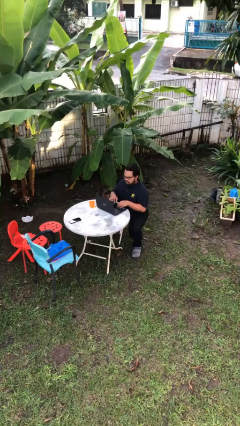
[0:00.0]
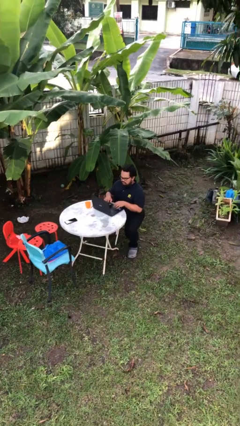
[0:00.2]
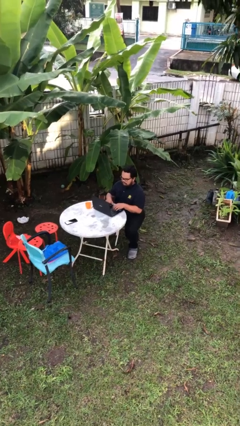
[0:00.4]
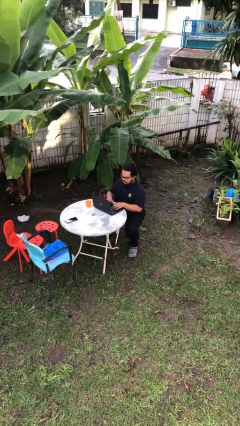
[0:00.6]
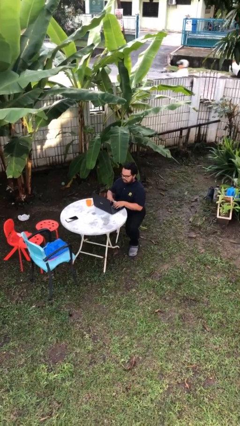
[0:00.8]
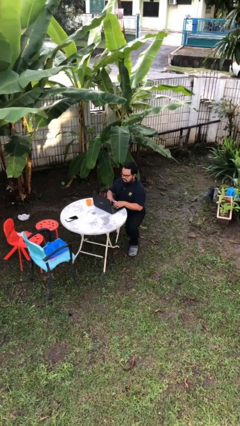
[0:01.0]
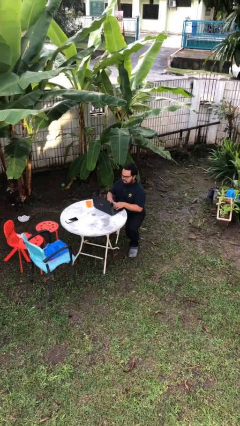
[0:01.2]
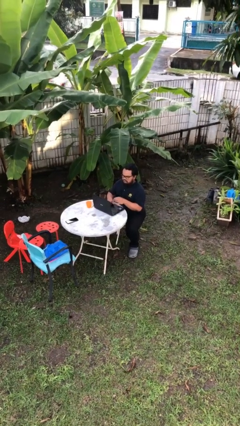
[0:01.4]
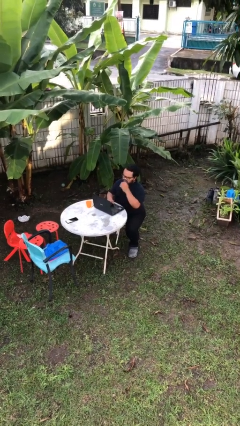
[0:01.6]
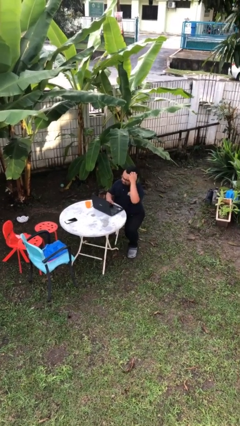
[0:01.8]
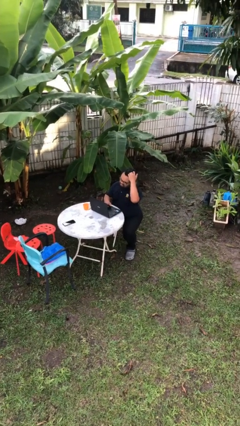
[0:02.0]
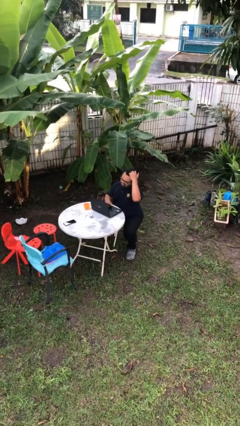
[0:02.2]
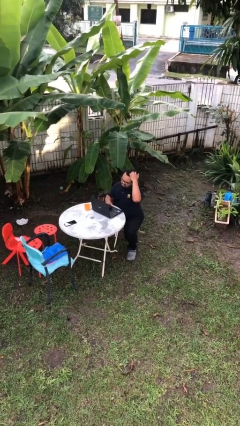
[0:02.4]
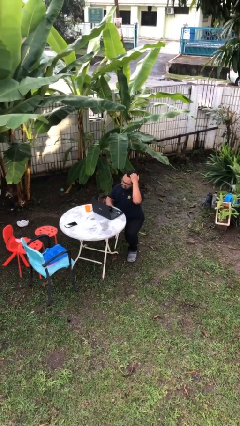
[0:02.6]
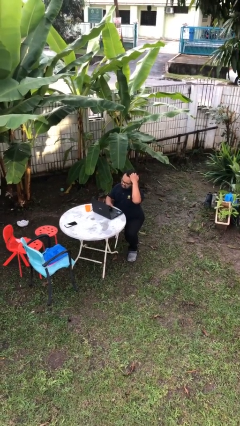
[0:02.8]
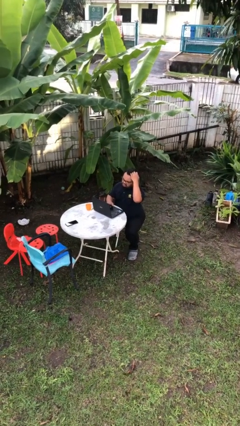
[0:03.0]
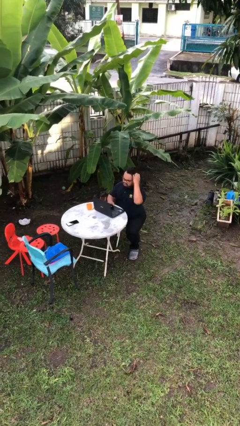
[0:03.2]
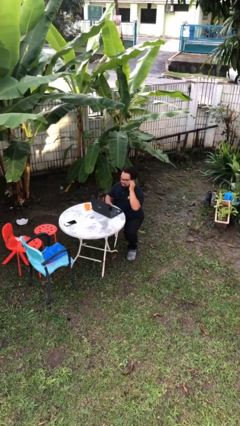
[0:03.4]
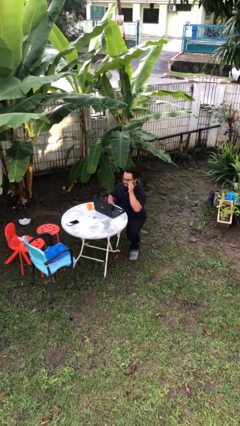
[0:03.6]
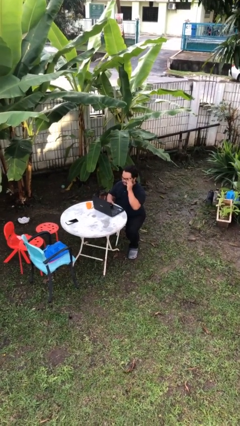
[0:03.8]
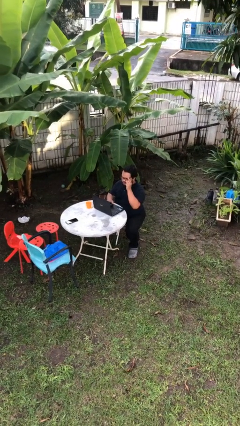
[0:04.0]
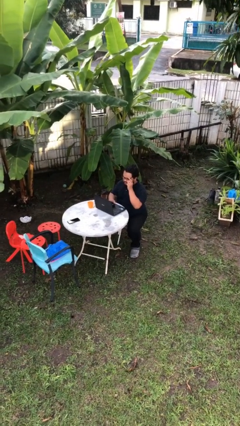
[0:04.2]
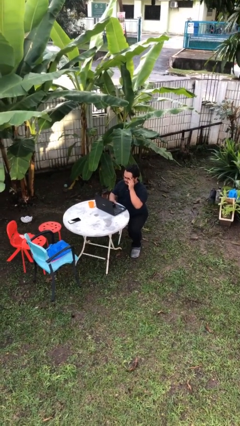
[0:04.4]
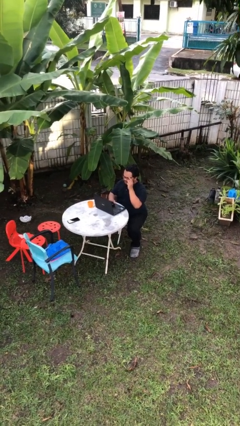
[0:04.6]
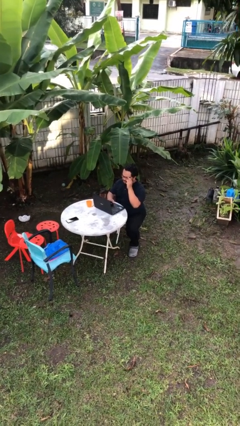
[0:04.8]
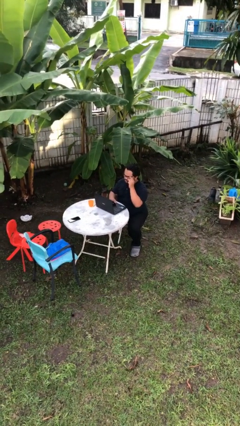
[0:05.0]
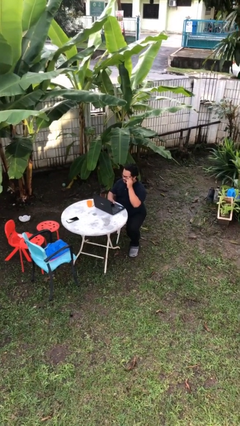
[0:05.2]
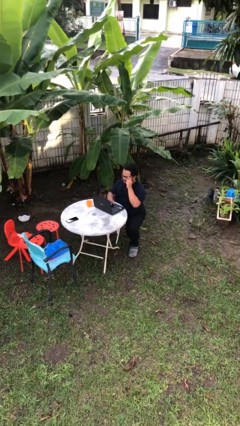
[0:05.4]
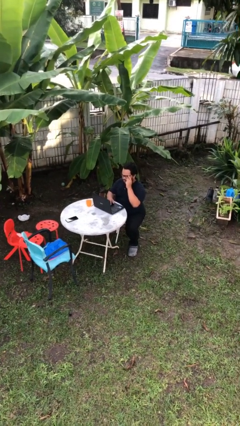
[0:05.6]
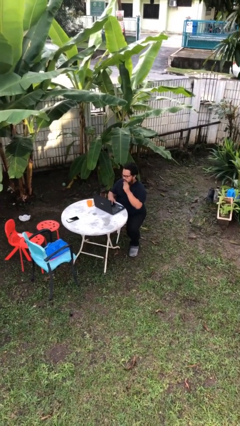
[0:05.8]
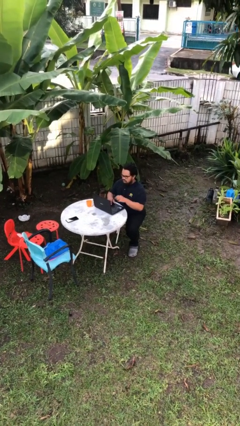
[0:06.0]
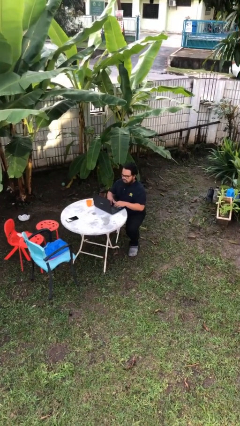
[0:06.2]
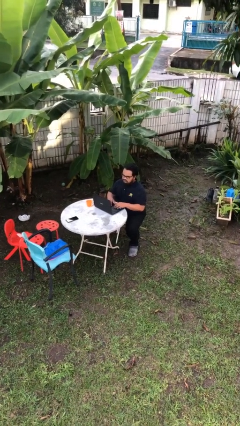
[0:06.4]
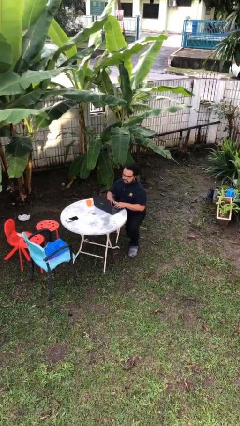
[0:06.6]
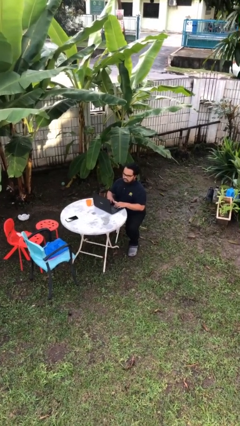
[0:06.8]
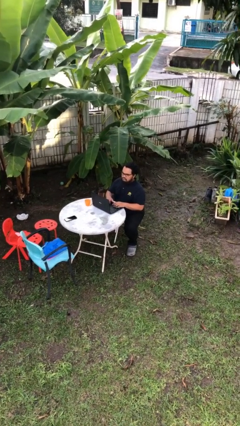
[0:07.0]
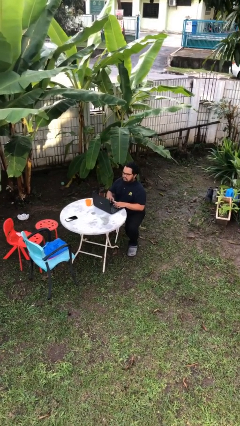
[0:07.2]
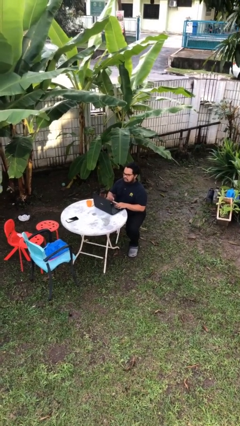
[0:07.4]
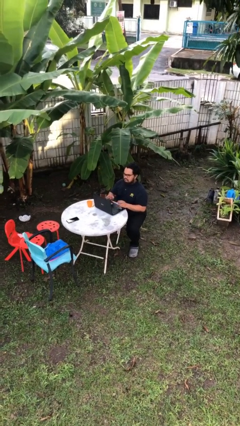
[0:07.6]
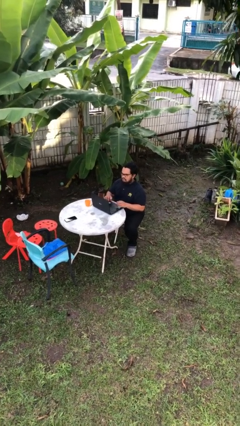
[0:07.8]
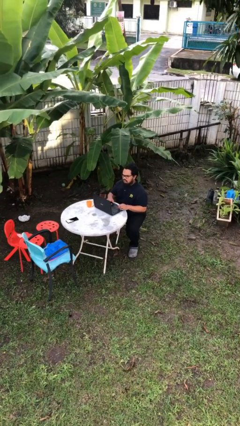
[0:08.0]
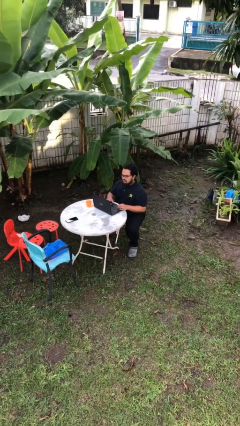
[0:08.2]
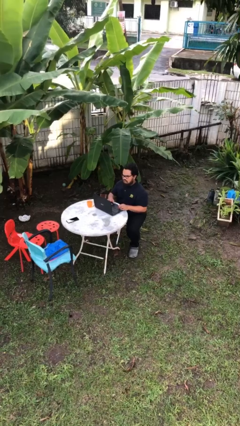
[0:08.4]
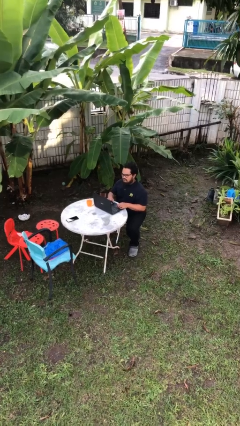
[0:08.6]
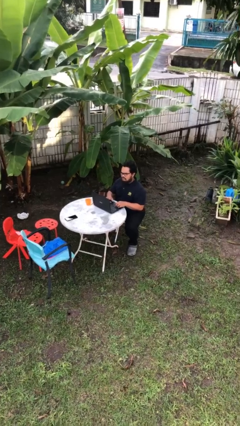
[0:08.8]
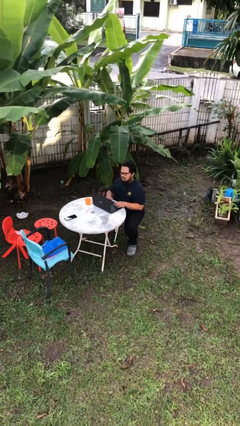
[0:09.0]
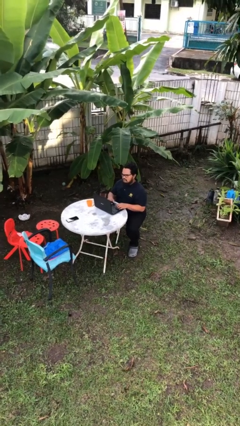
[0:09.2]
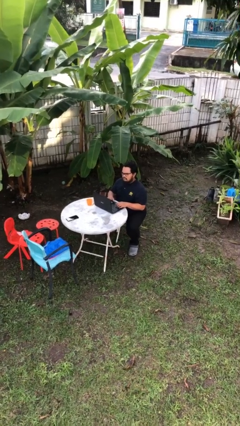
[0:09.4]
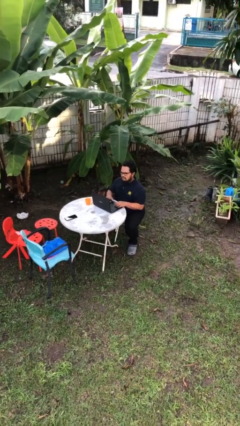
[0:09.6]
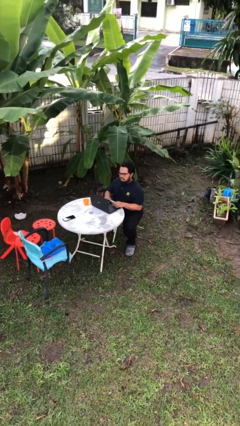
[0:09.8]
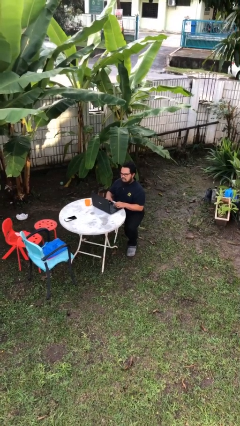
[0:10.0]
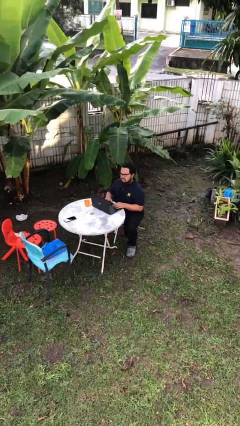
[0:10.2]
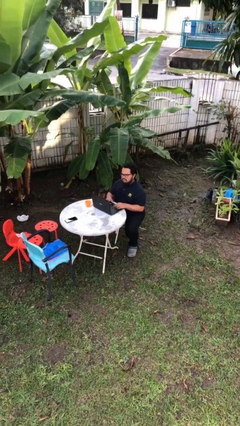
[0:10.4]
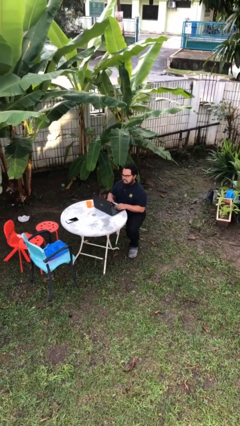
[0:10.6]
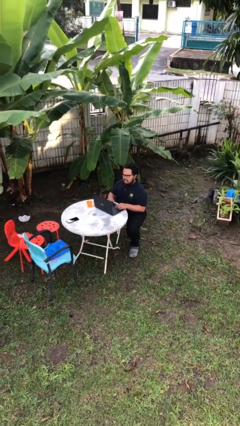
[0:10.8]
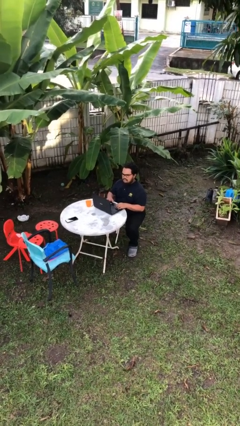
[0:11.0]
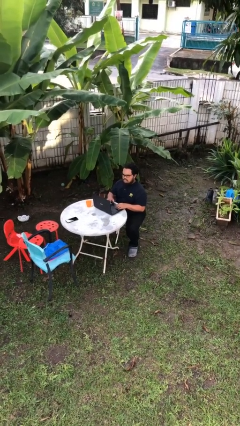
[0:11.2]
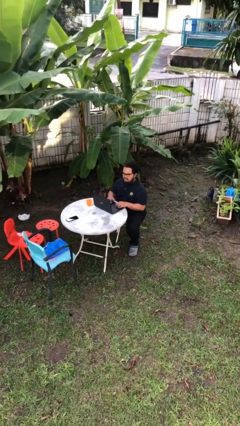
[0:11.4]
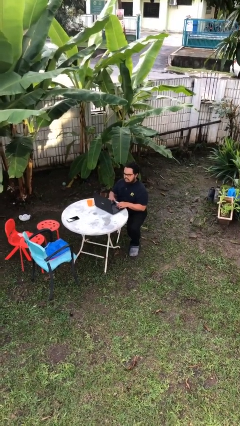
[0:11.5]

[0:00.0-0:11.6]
person interacts with laptop

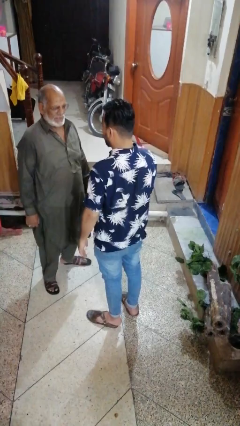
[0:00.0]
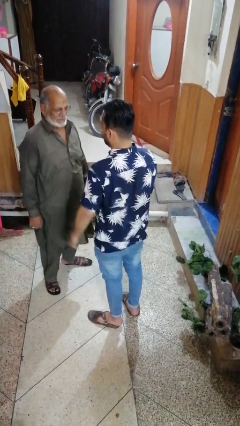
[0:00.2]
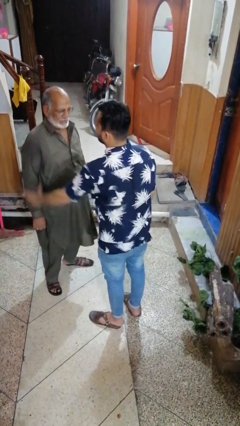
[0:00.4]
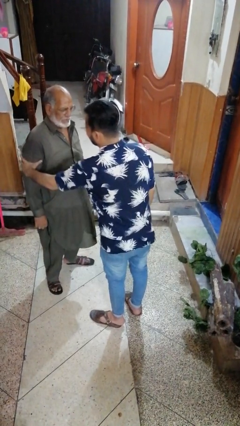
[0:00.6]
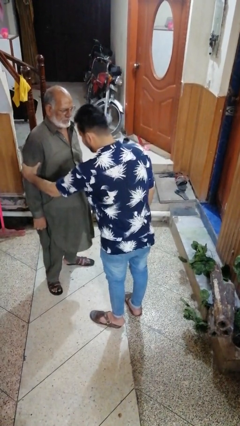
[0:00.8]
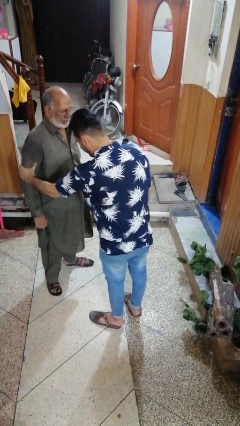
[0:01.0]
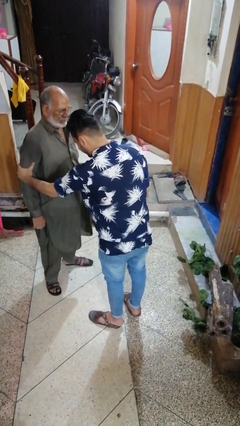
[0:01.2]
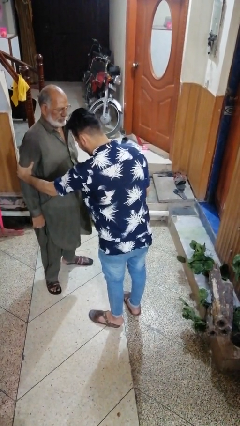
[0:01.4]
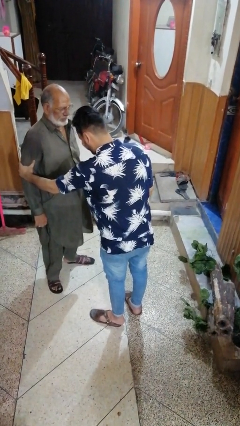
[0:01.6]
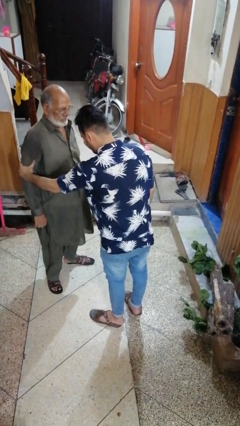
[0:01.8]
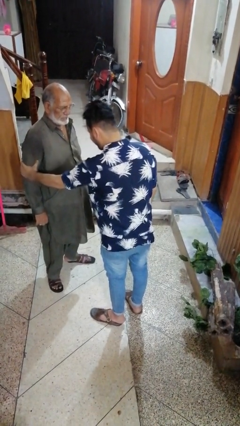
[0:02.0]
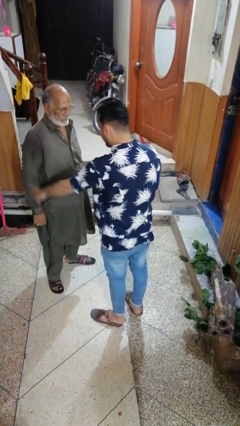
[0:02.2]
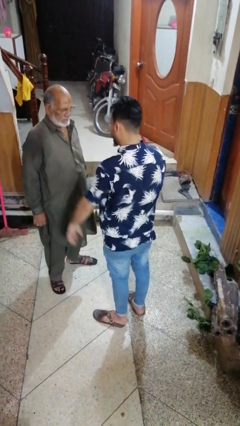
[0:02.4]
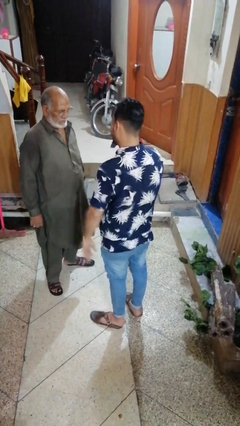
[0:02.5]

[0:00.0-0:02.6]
person grabs person by forearm

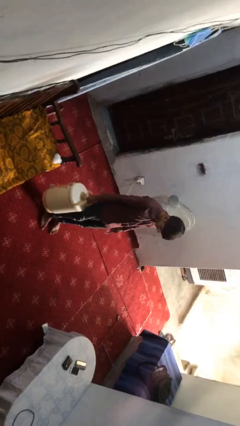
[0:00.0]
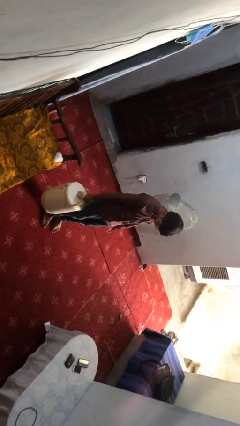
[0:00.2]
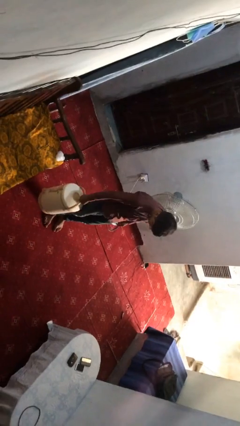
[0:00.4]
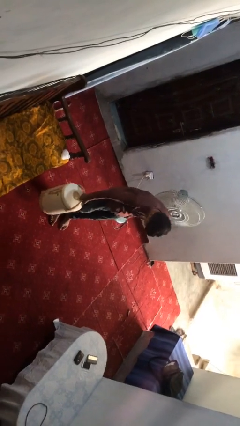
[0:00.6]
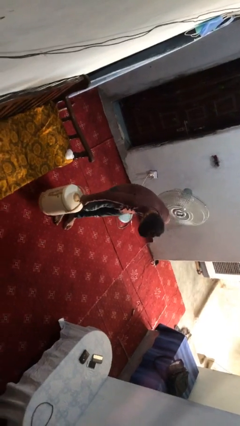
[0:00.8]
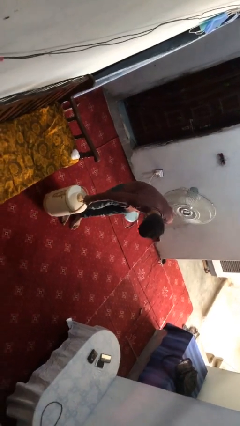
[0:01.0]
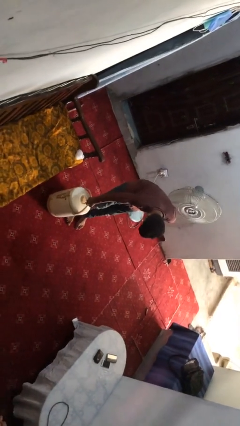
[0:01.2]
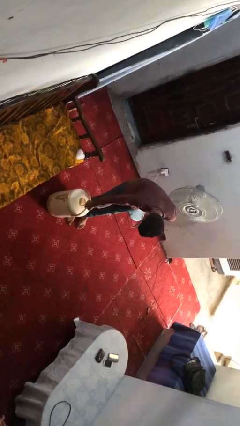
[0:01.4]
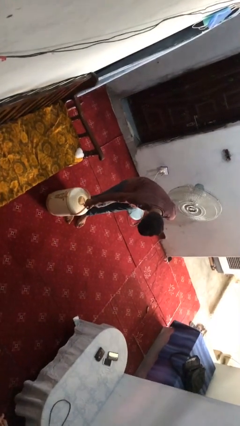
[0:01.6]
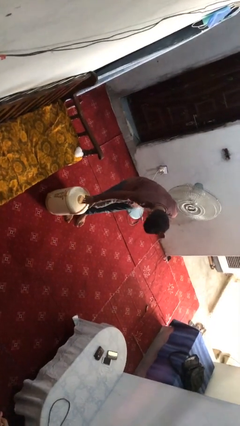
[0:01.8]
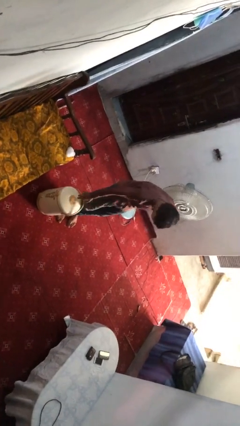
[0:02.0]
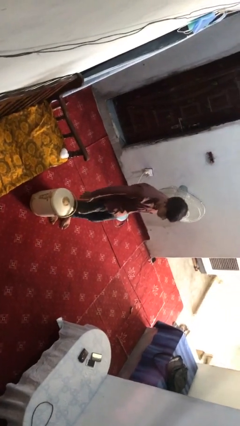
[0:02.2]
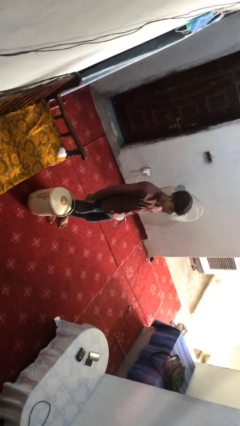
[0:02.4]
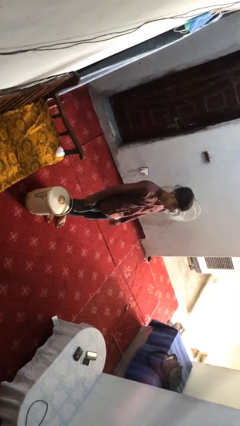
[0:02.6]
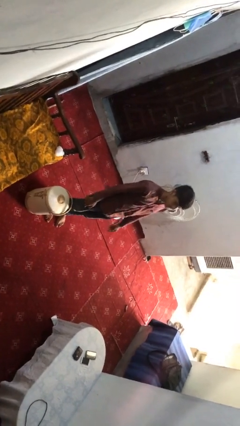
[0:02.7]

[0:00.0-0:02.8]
person puts down object on floor

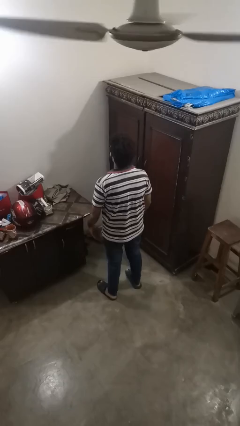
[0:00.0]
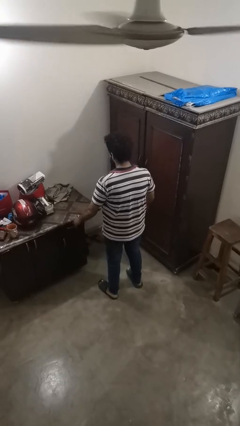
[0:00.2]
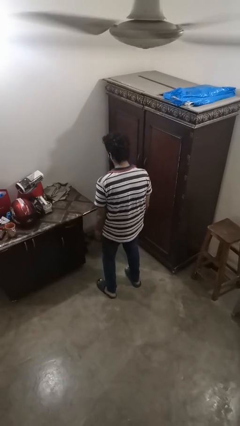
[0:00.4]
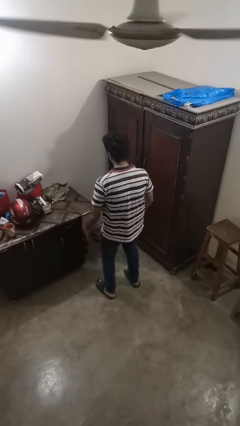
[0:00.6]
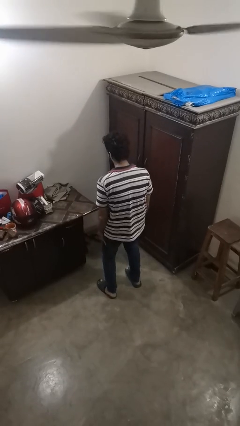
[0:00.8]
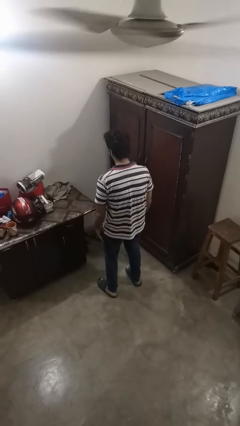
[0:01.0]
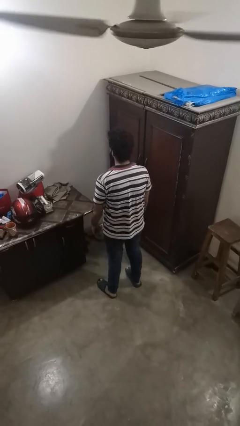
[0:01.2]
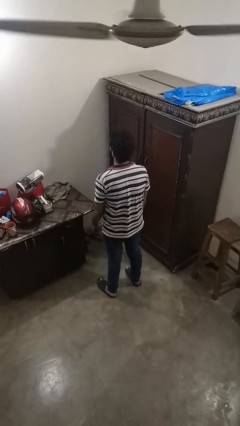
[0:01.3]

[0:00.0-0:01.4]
person slaps hands on thighs
